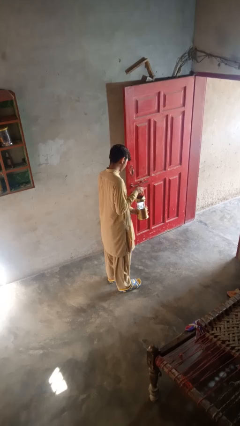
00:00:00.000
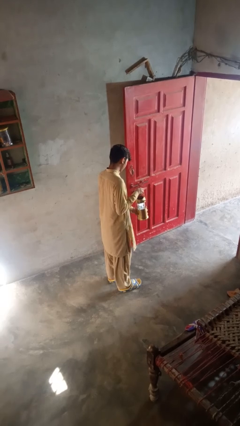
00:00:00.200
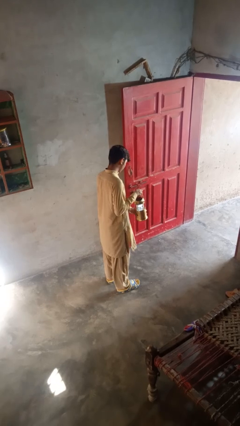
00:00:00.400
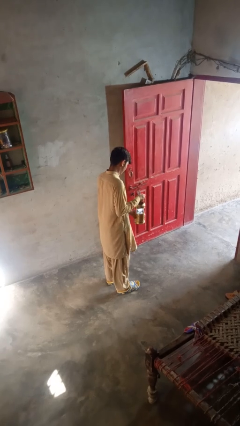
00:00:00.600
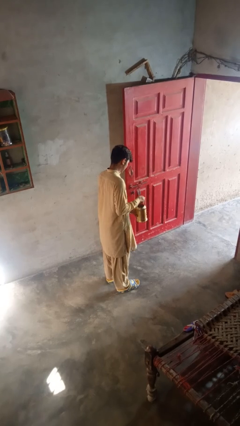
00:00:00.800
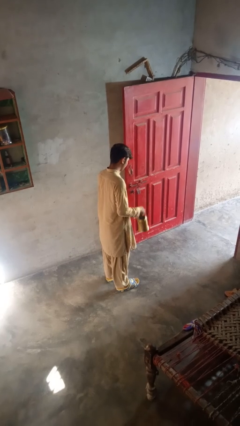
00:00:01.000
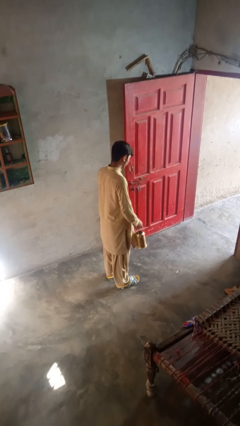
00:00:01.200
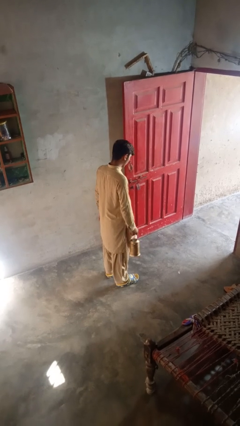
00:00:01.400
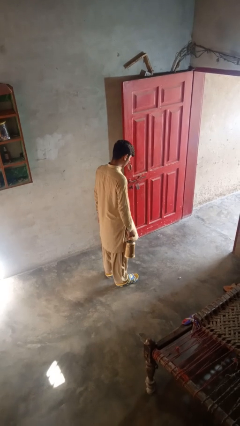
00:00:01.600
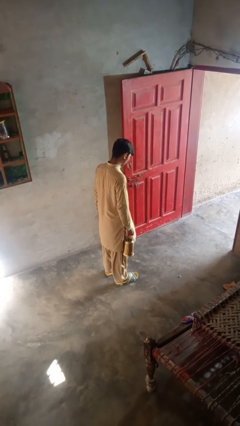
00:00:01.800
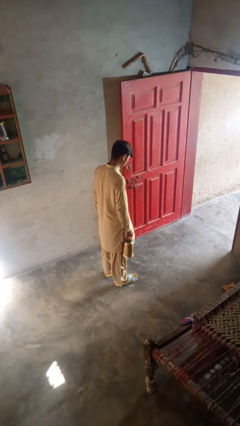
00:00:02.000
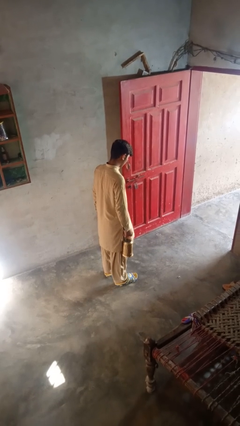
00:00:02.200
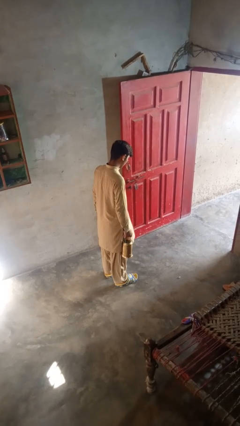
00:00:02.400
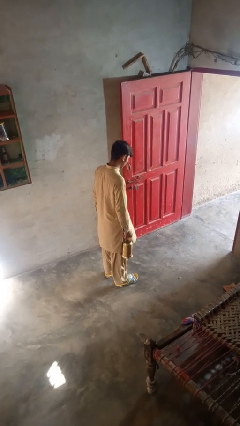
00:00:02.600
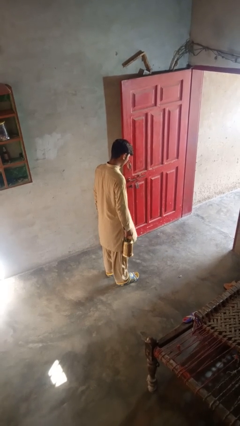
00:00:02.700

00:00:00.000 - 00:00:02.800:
person turns off lamp

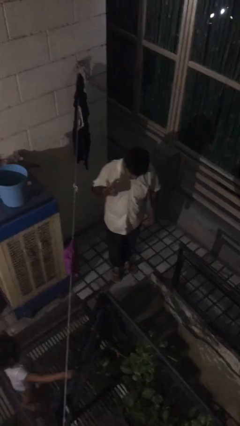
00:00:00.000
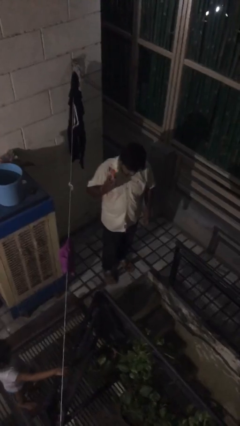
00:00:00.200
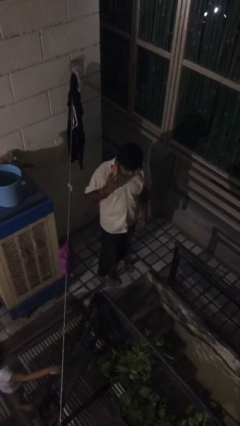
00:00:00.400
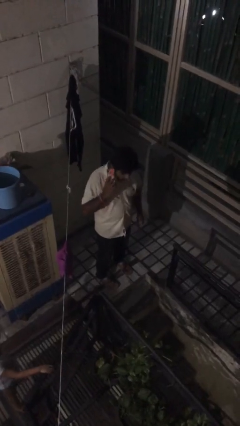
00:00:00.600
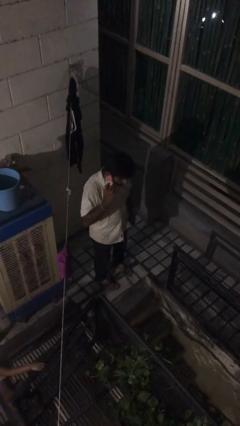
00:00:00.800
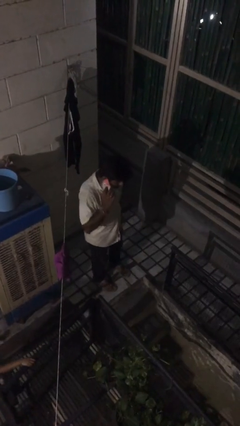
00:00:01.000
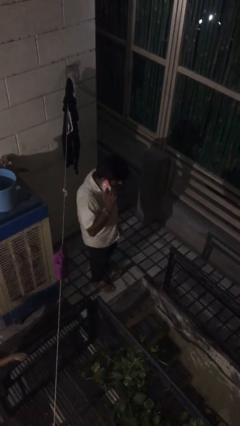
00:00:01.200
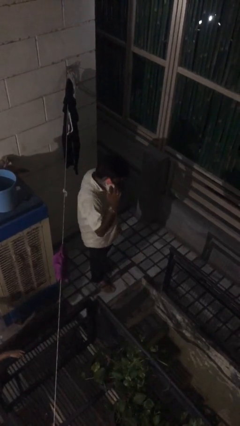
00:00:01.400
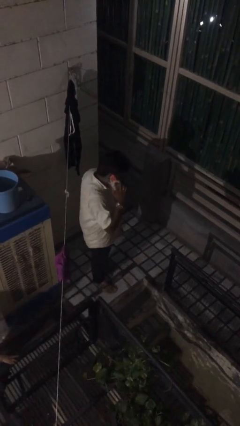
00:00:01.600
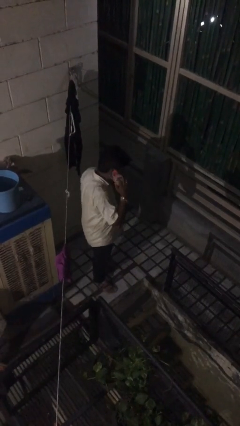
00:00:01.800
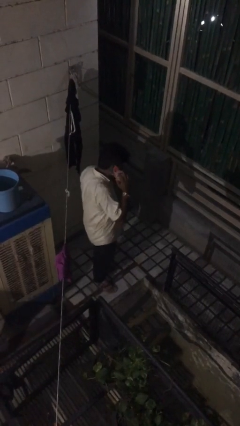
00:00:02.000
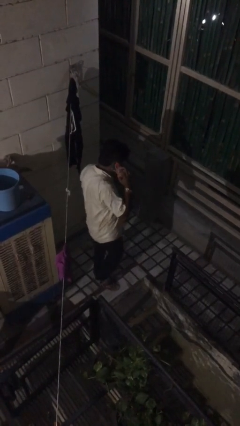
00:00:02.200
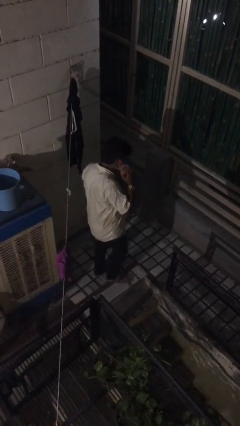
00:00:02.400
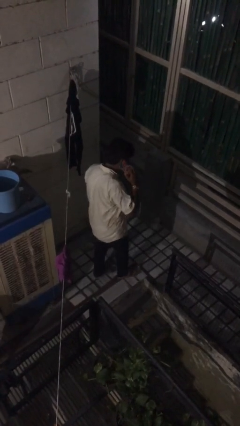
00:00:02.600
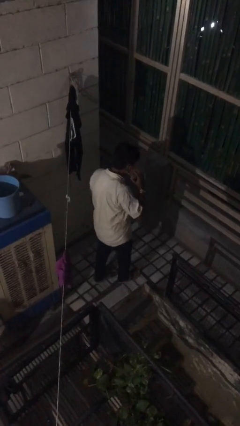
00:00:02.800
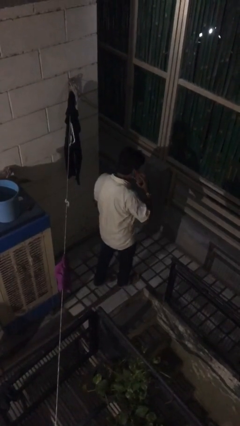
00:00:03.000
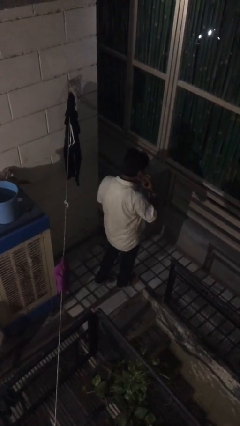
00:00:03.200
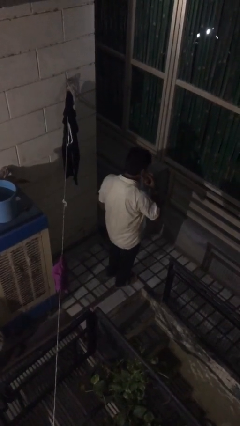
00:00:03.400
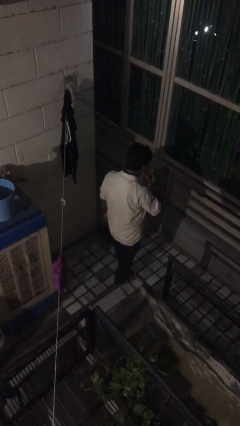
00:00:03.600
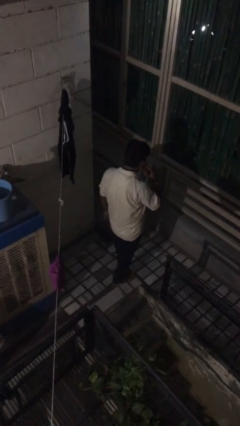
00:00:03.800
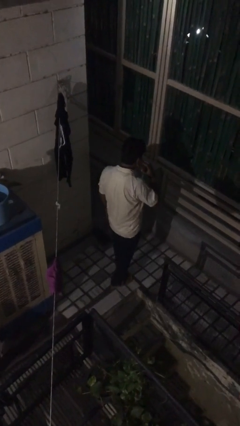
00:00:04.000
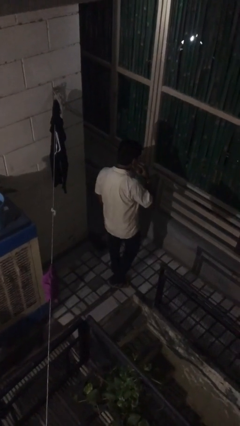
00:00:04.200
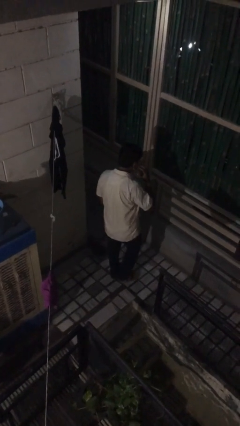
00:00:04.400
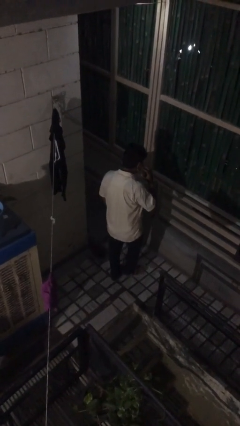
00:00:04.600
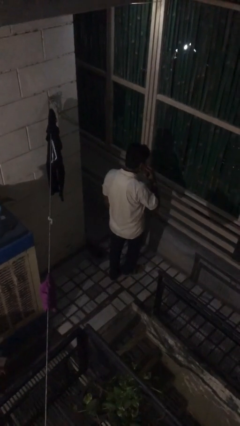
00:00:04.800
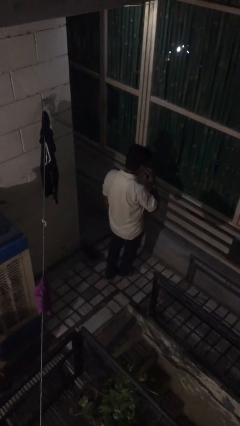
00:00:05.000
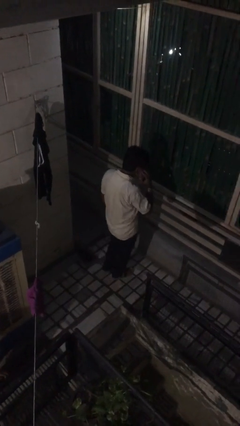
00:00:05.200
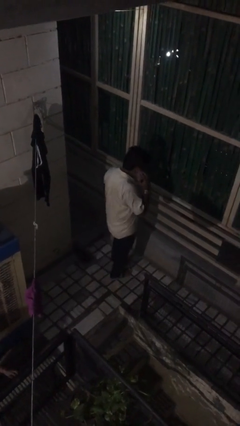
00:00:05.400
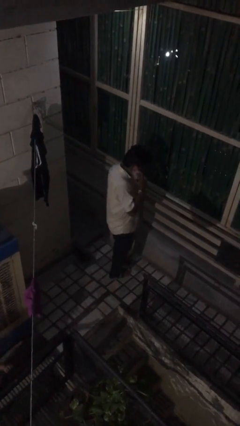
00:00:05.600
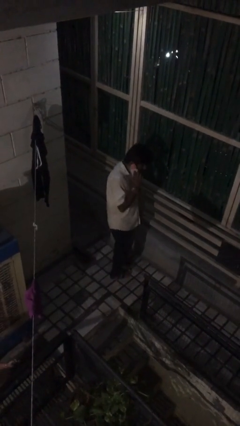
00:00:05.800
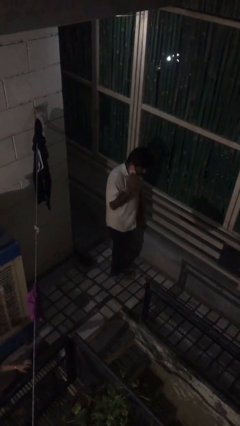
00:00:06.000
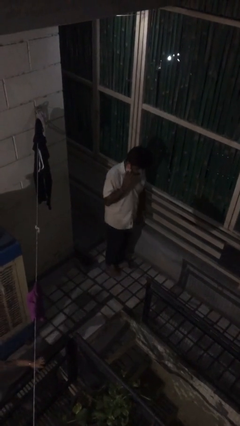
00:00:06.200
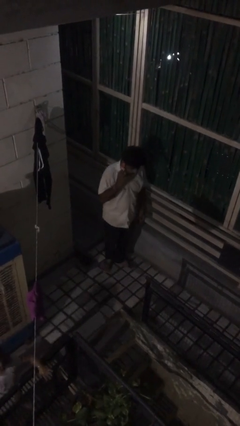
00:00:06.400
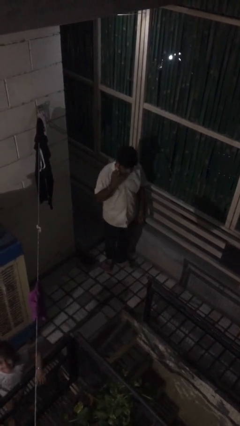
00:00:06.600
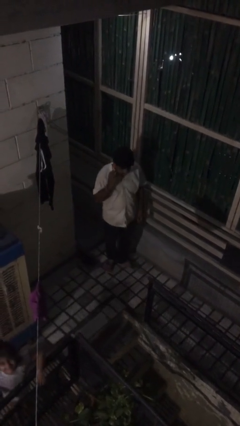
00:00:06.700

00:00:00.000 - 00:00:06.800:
person talks on phone

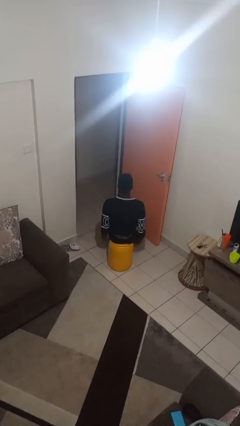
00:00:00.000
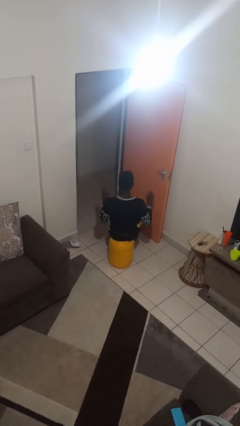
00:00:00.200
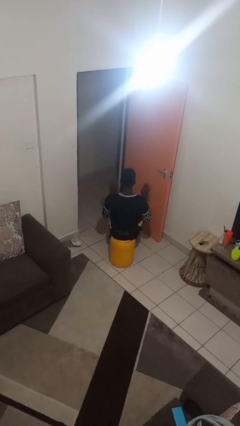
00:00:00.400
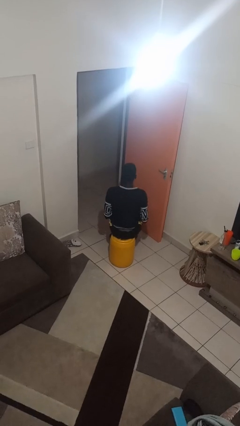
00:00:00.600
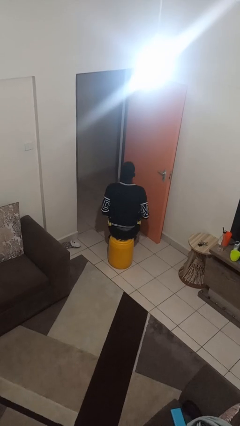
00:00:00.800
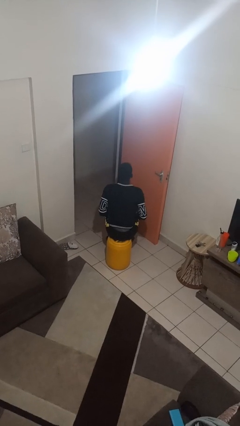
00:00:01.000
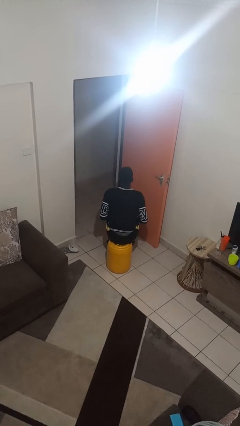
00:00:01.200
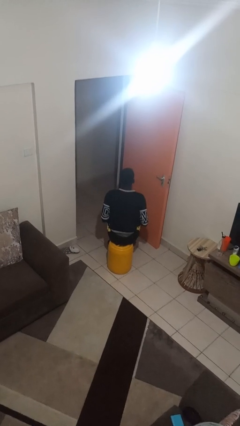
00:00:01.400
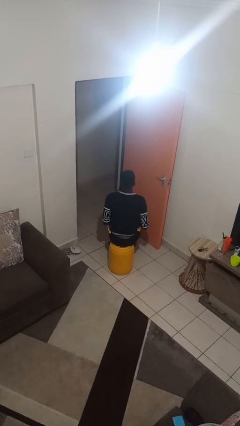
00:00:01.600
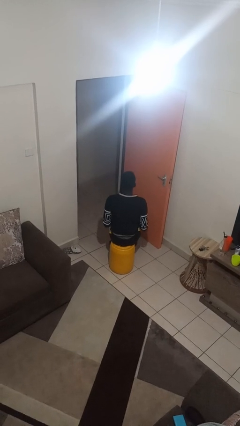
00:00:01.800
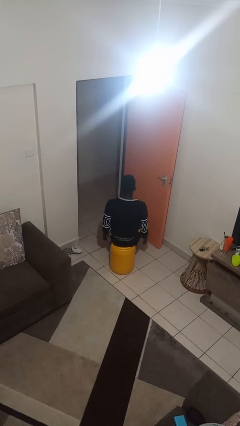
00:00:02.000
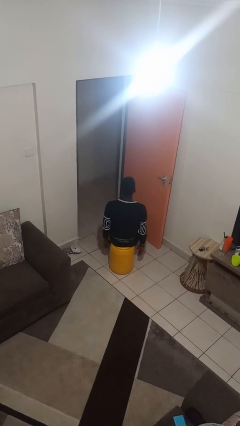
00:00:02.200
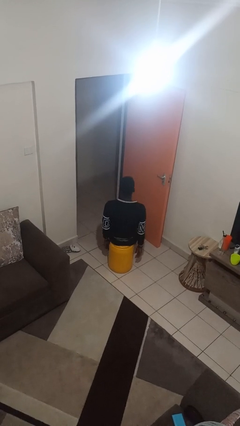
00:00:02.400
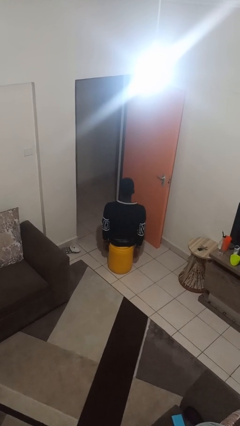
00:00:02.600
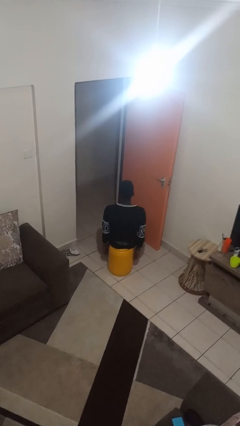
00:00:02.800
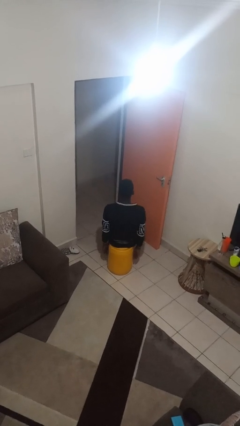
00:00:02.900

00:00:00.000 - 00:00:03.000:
person slaps hands on thighs

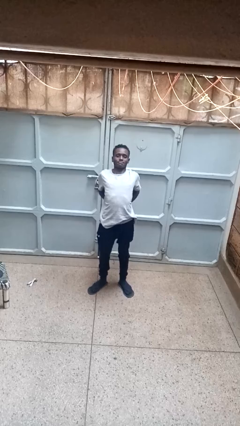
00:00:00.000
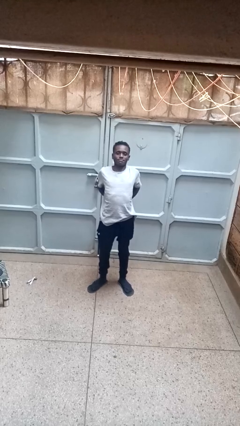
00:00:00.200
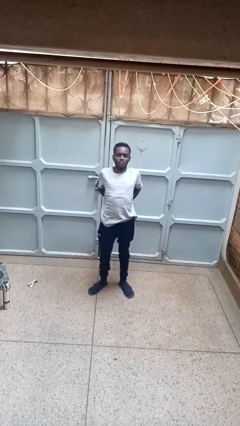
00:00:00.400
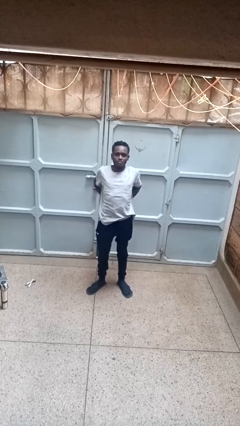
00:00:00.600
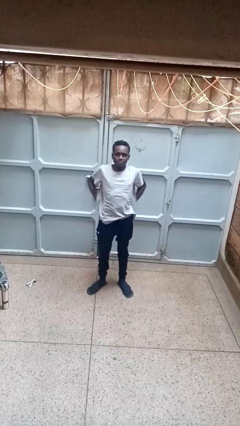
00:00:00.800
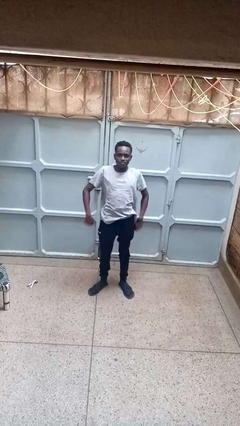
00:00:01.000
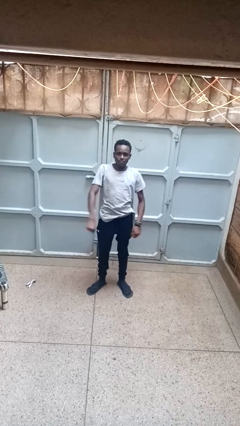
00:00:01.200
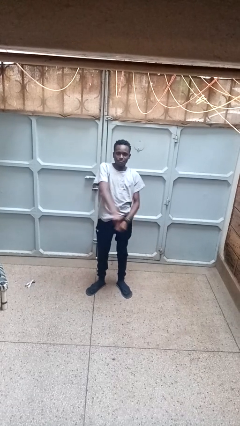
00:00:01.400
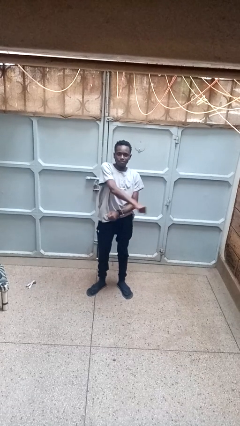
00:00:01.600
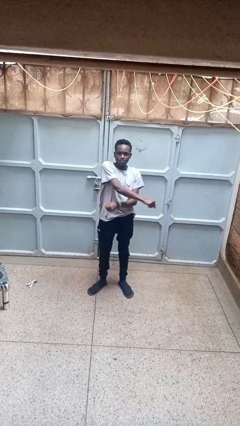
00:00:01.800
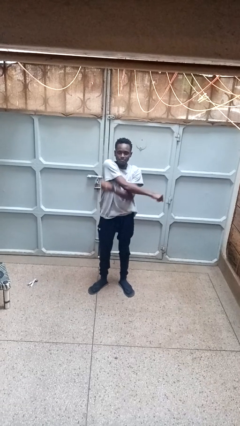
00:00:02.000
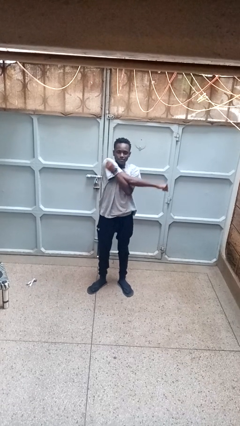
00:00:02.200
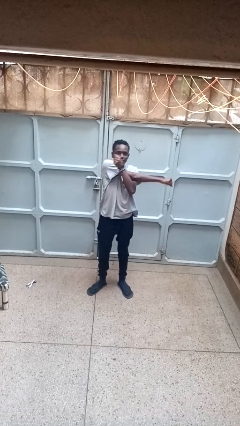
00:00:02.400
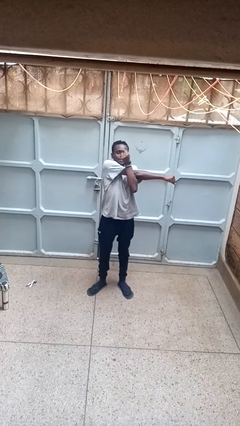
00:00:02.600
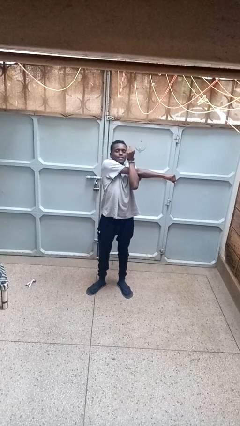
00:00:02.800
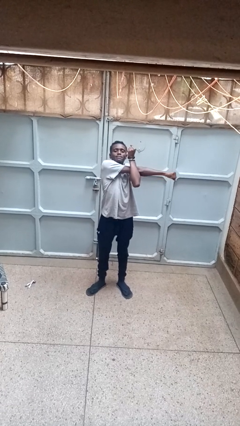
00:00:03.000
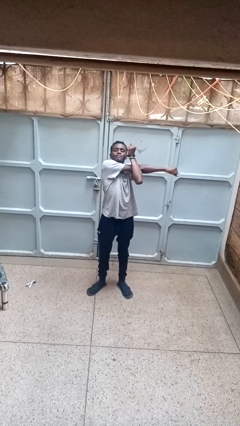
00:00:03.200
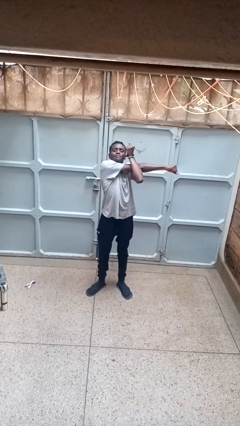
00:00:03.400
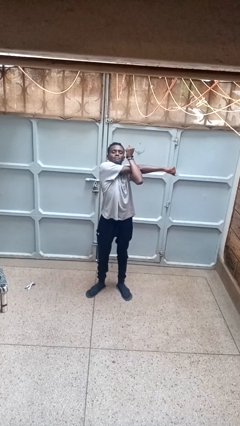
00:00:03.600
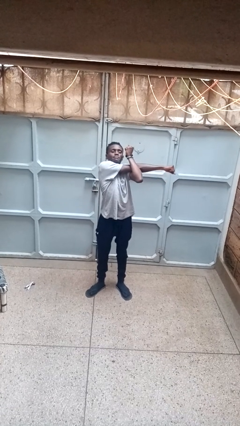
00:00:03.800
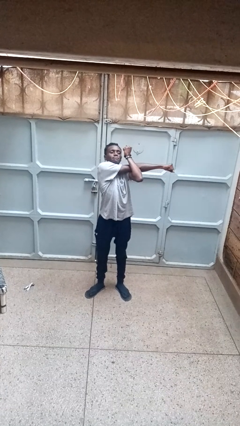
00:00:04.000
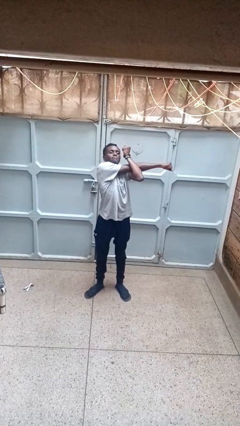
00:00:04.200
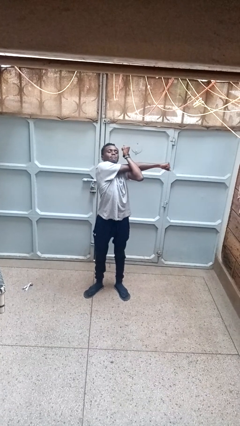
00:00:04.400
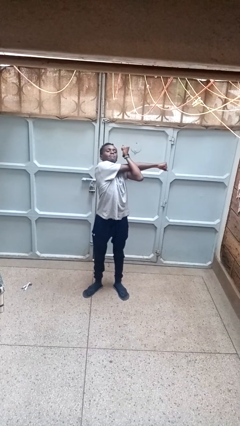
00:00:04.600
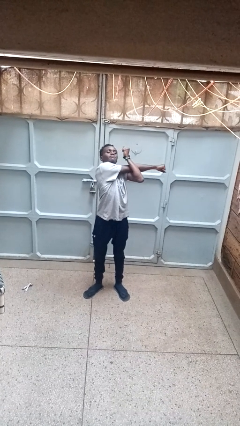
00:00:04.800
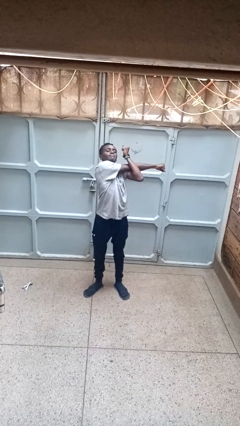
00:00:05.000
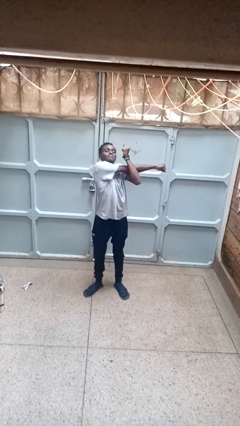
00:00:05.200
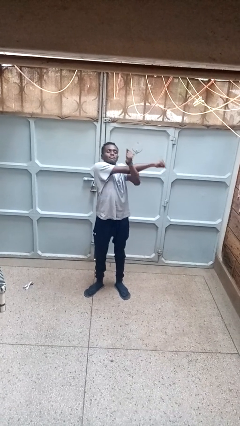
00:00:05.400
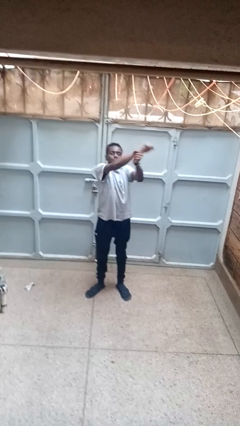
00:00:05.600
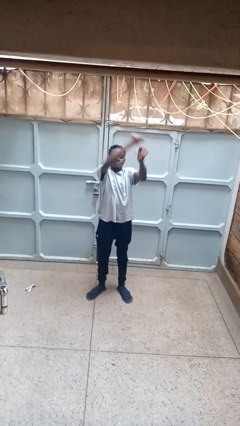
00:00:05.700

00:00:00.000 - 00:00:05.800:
person stretches arms to side
